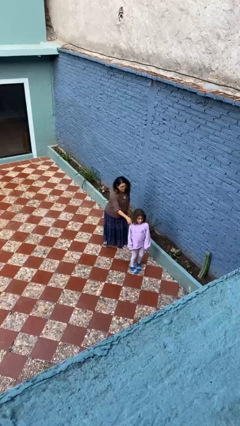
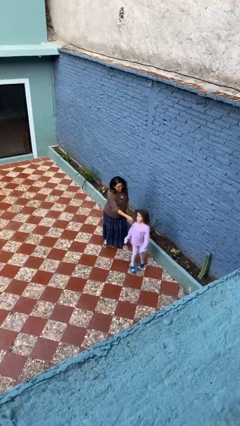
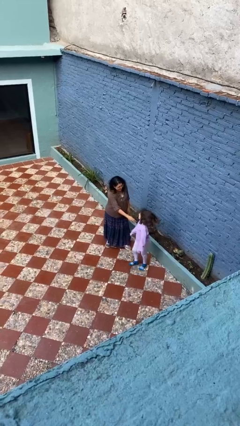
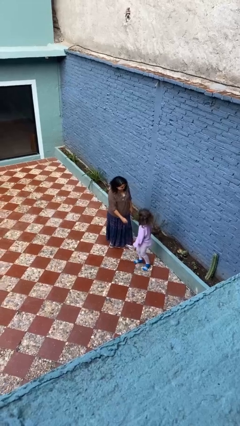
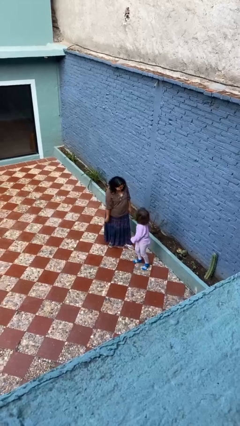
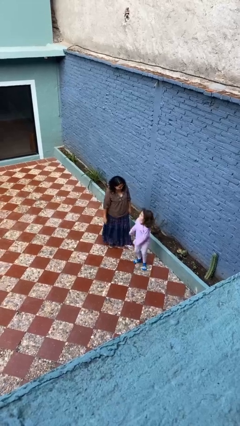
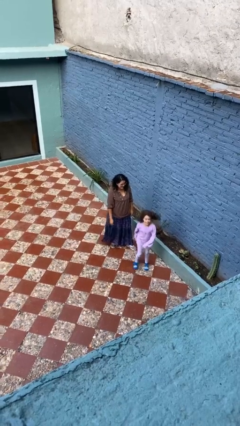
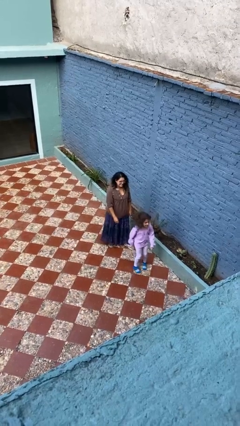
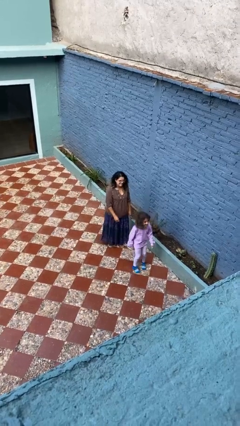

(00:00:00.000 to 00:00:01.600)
person spins person around

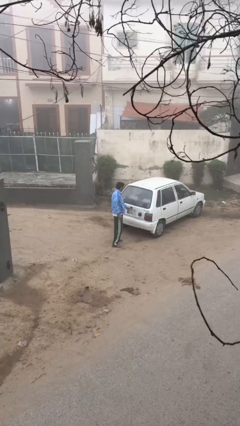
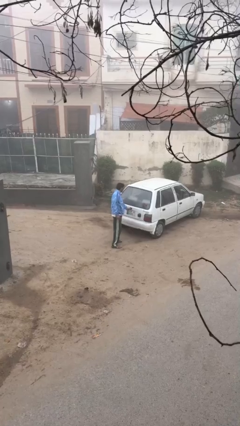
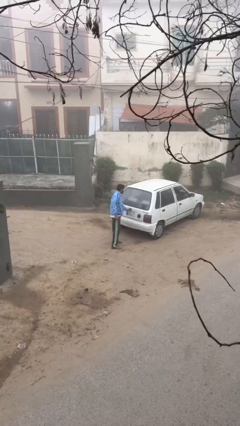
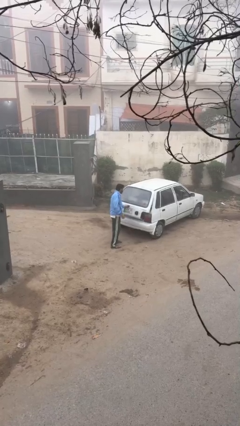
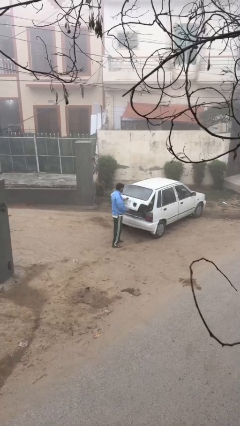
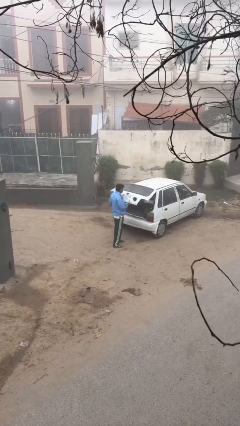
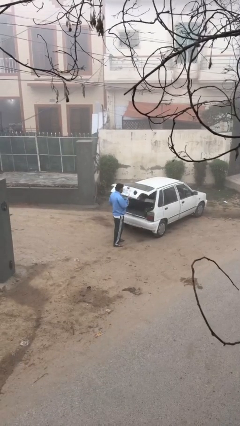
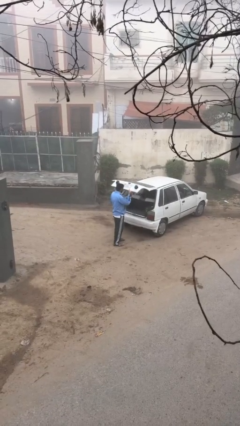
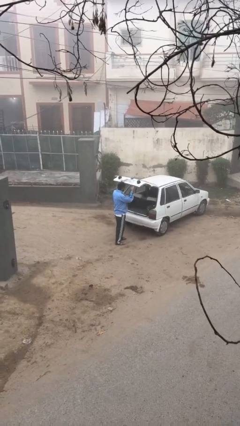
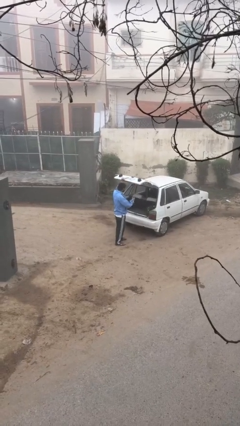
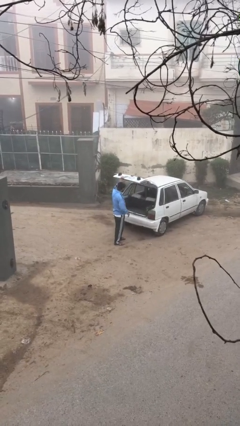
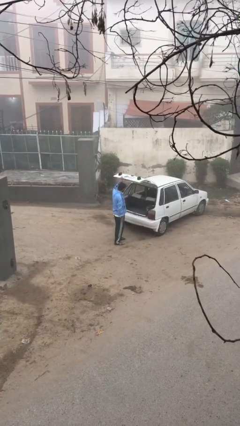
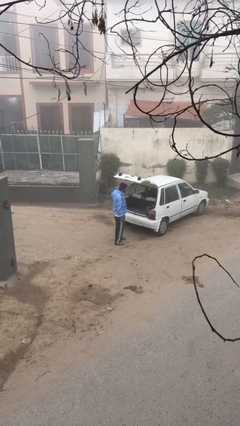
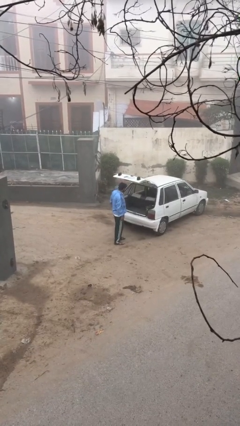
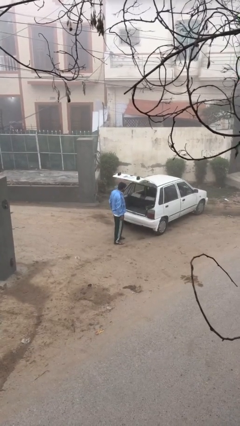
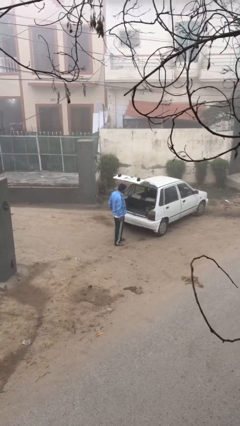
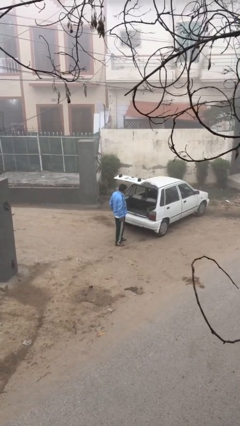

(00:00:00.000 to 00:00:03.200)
person opens car trunk

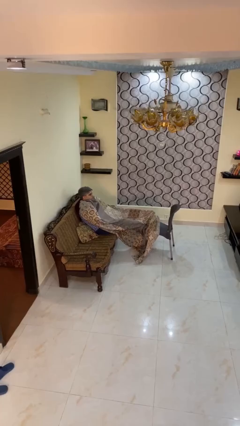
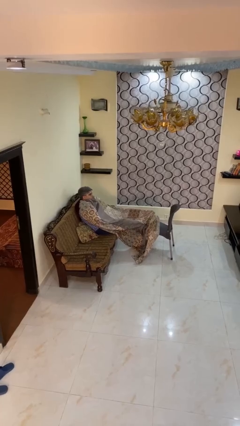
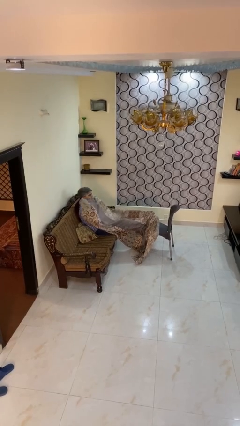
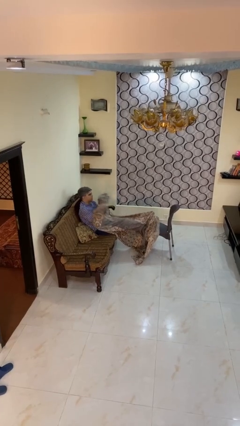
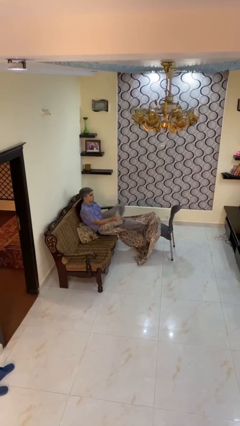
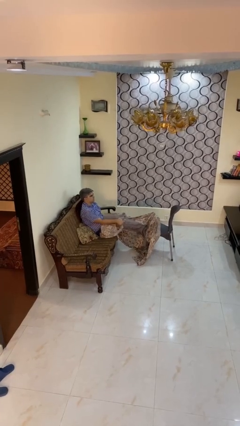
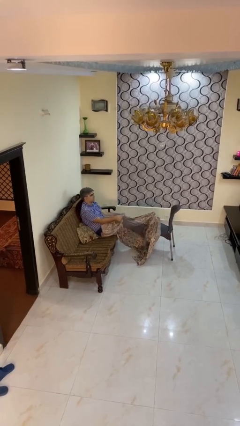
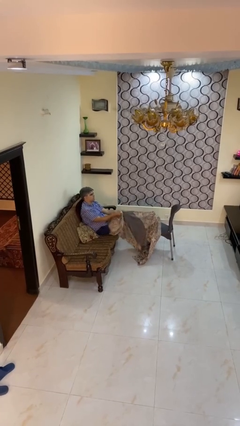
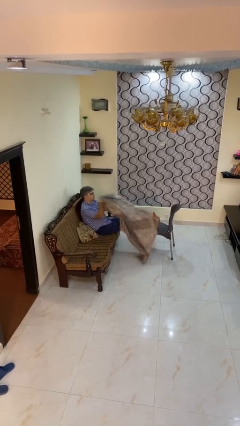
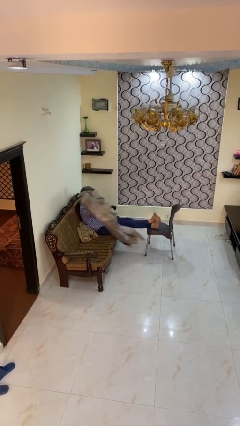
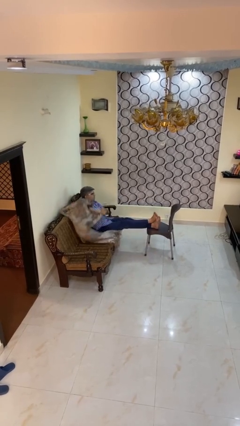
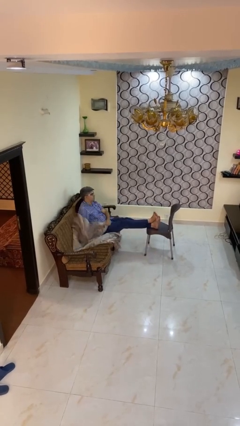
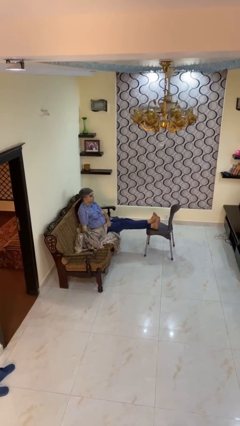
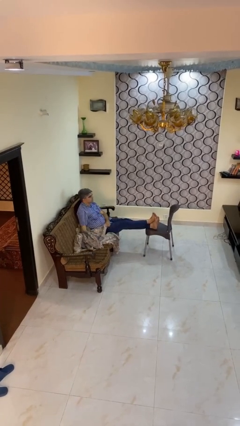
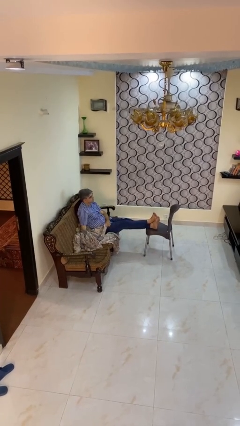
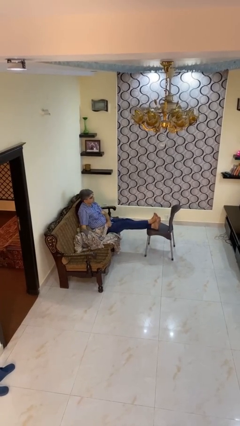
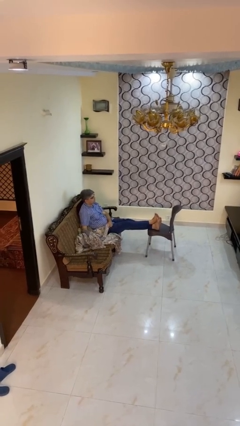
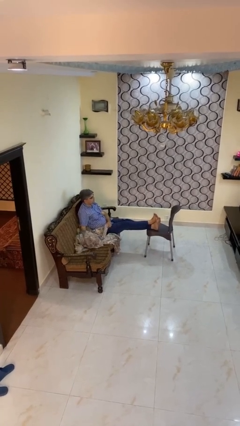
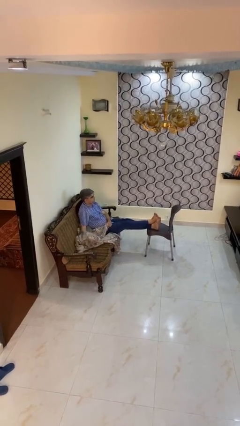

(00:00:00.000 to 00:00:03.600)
person uncovers with blanket

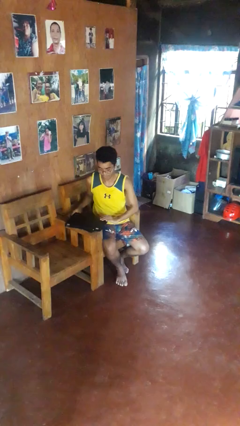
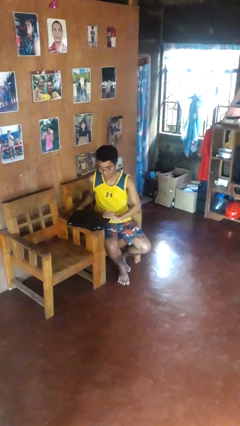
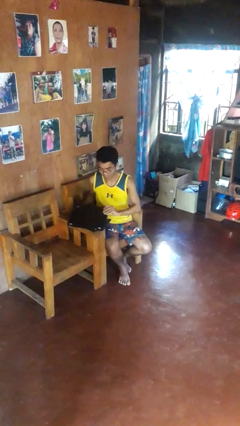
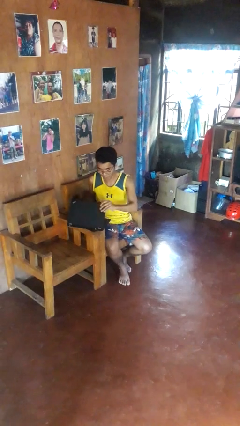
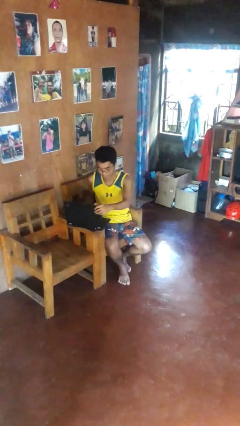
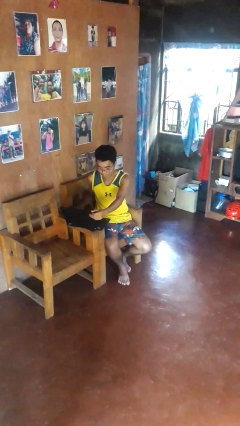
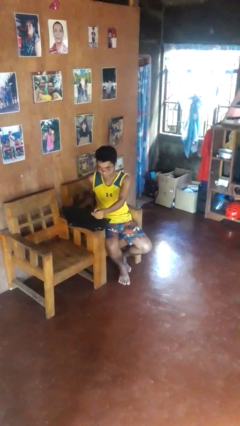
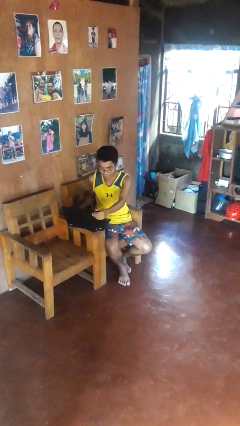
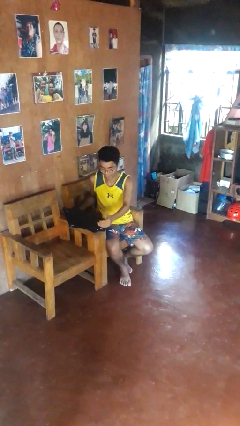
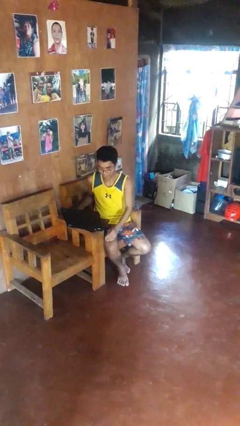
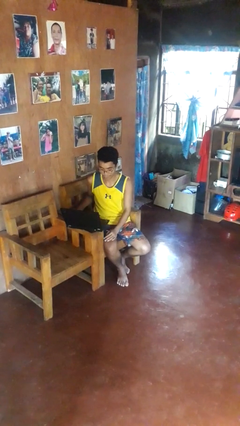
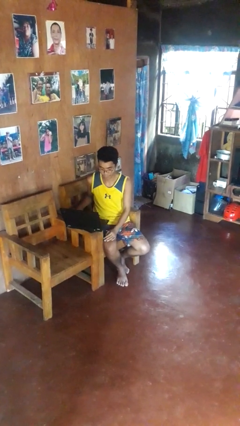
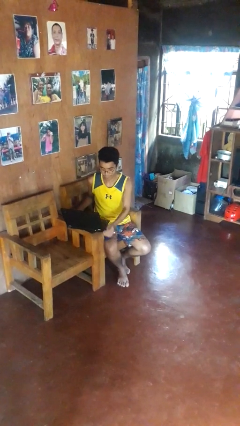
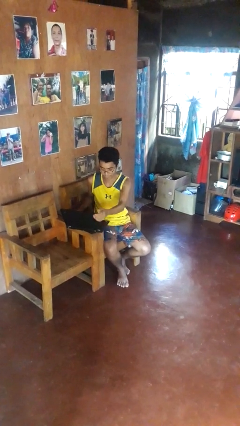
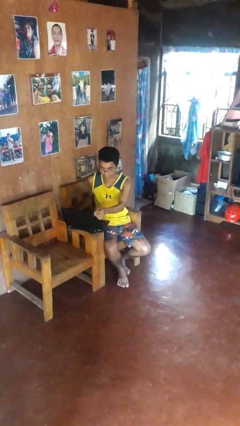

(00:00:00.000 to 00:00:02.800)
person opens laptop

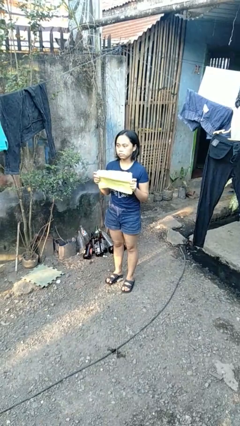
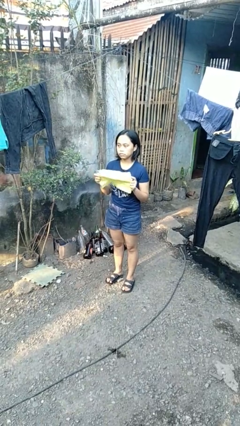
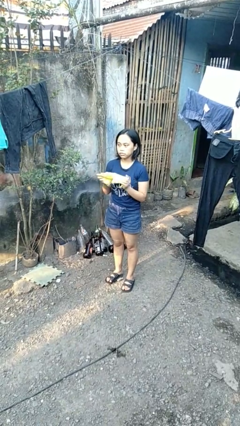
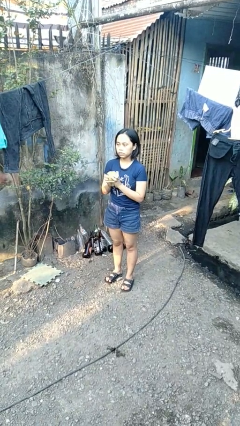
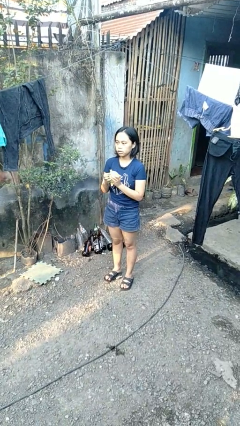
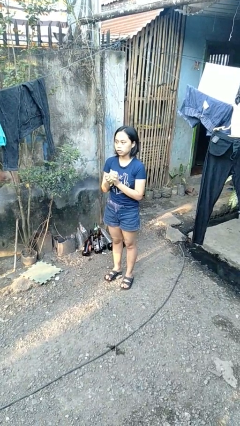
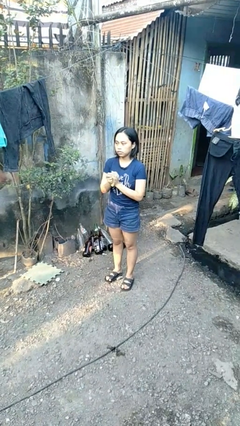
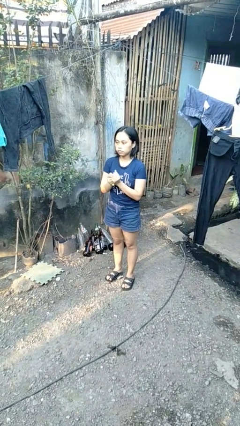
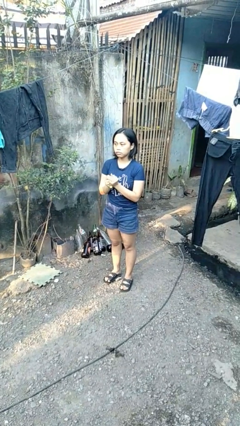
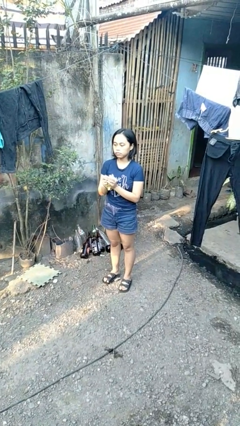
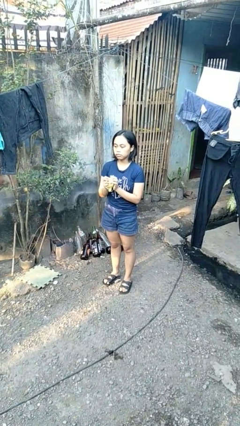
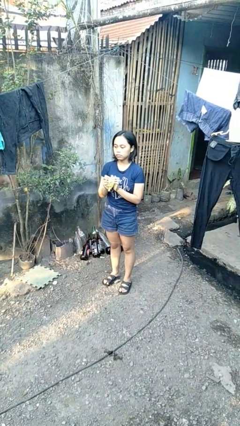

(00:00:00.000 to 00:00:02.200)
person crumples paper

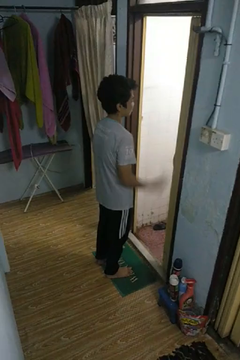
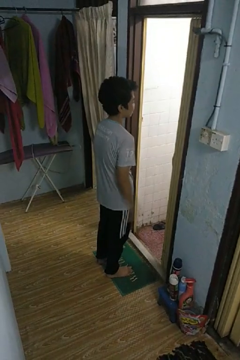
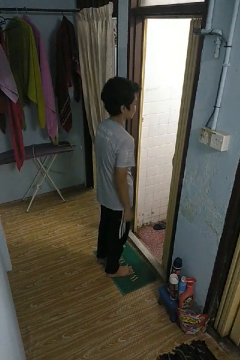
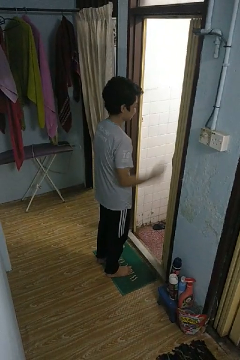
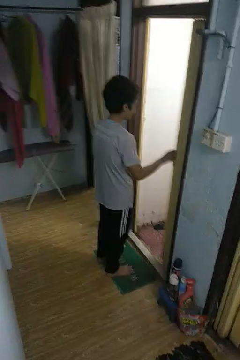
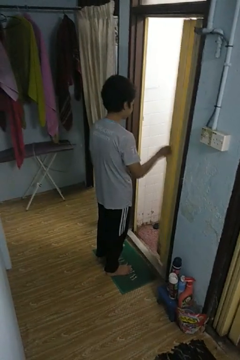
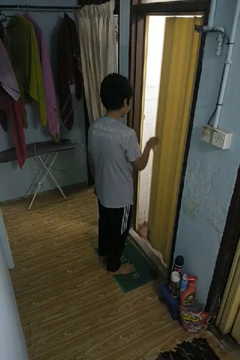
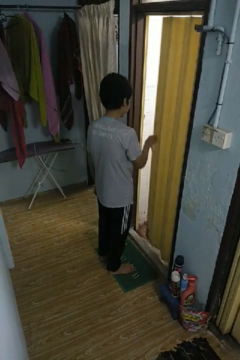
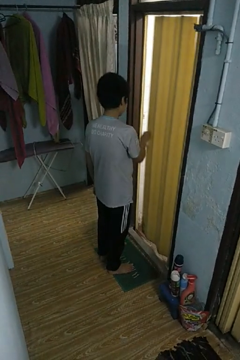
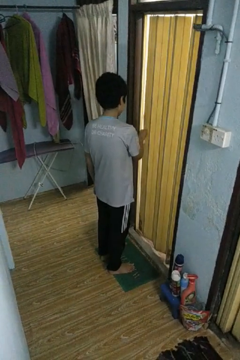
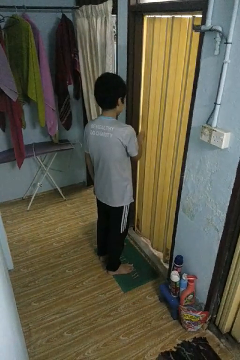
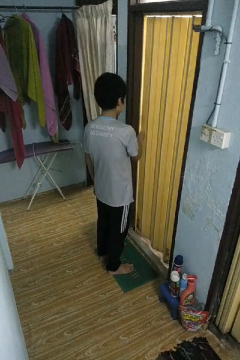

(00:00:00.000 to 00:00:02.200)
person closes sliding door

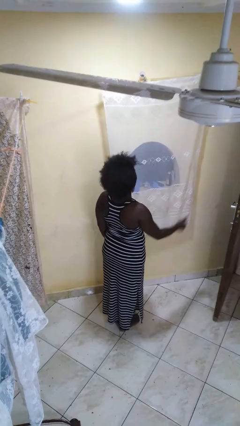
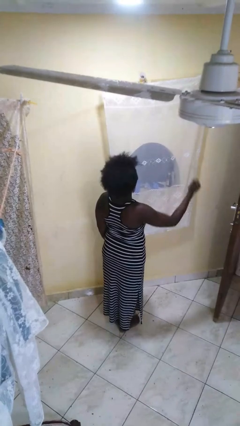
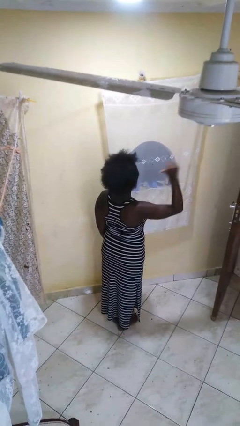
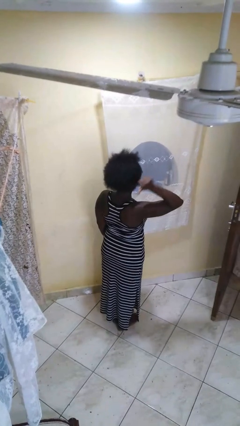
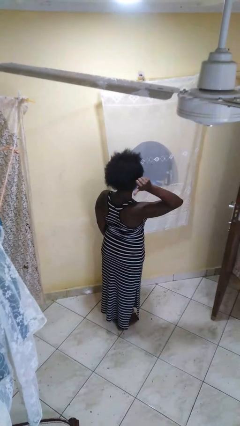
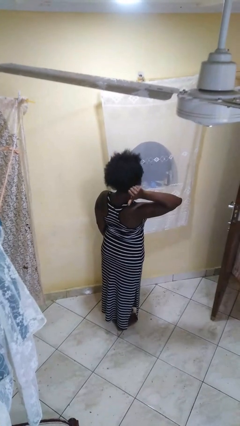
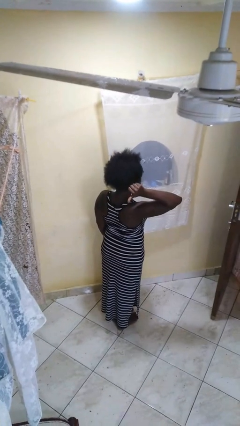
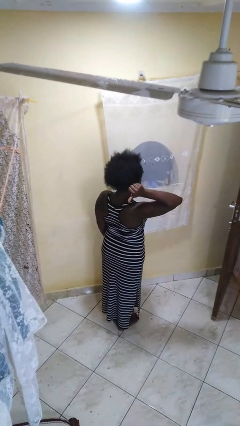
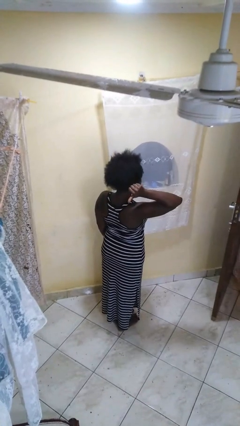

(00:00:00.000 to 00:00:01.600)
person gestures behind me

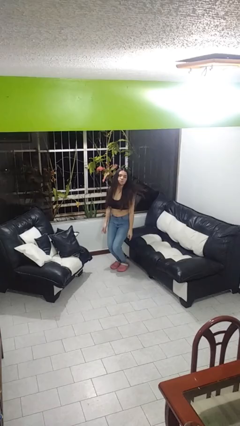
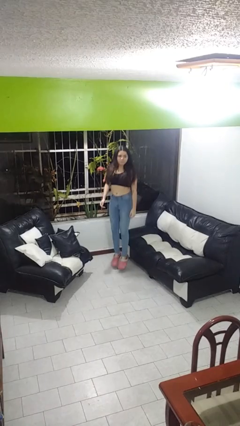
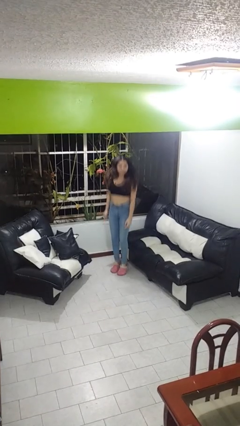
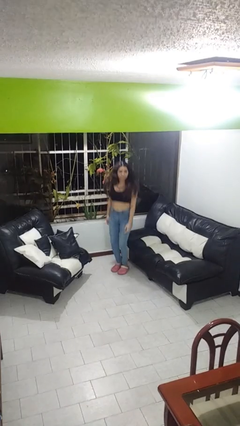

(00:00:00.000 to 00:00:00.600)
person jumps
